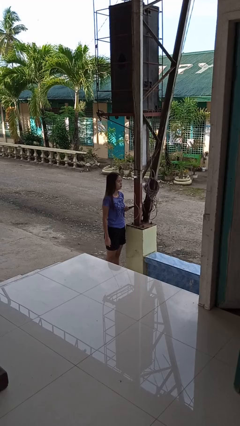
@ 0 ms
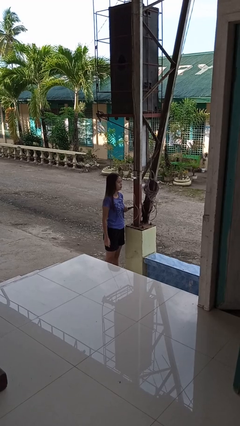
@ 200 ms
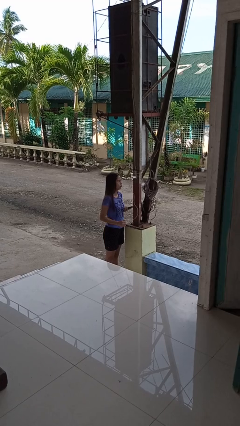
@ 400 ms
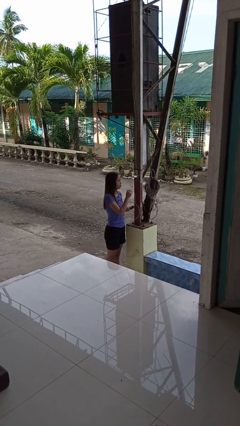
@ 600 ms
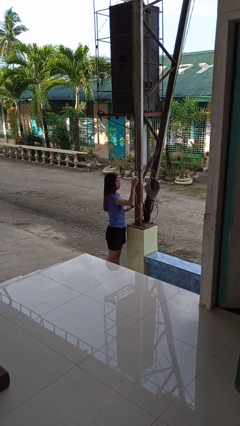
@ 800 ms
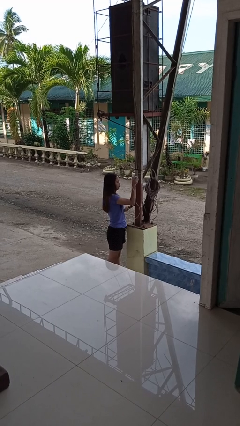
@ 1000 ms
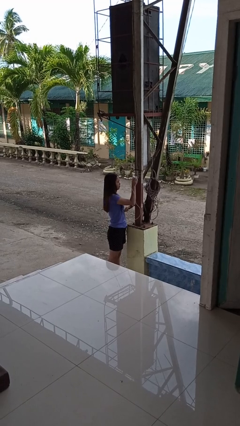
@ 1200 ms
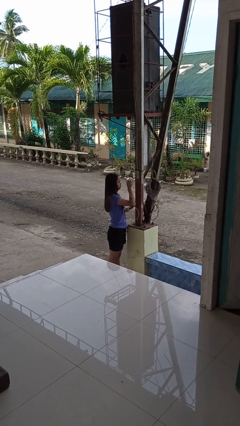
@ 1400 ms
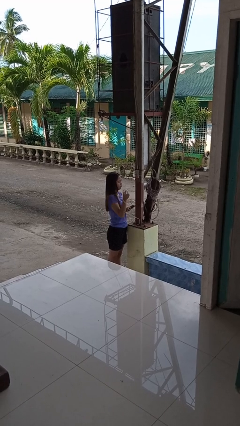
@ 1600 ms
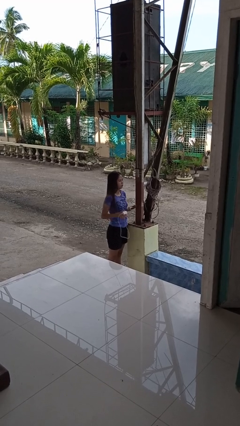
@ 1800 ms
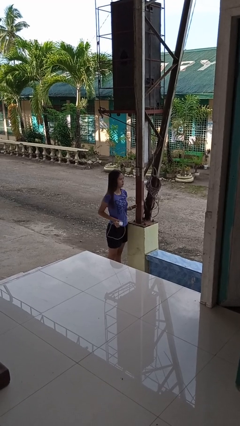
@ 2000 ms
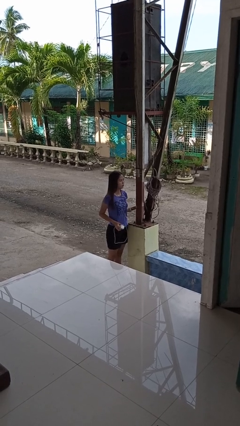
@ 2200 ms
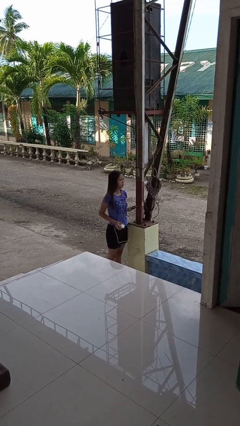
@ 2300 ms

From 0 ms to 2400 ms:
person unplugs from electrical socket

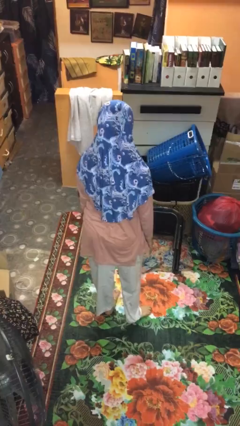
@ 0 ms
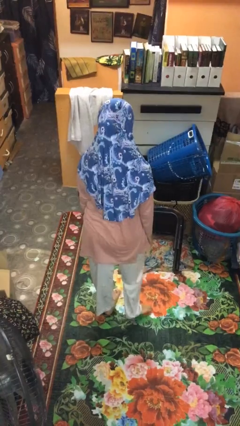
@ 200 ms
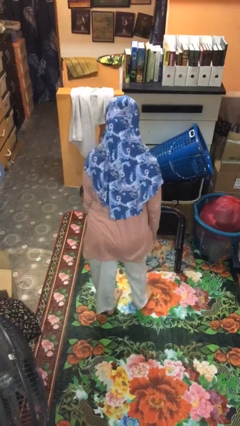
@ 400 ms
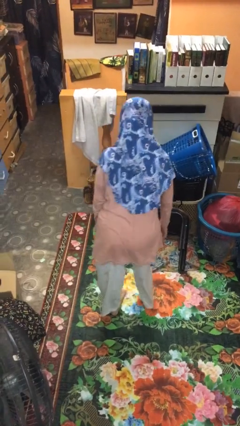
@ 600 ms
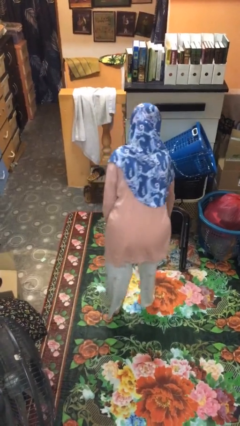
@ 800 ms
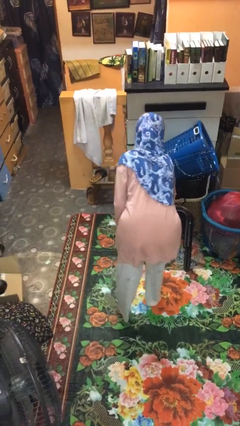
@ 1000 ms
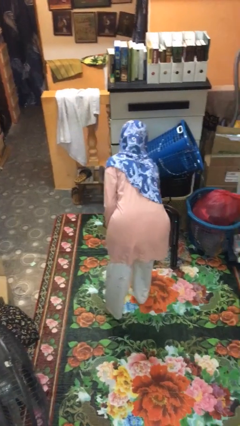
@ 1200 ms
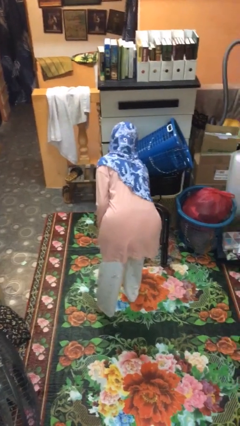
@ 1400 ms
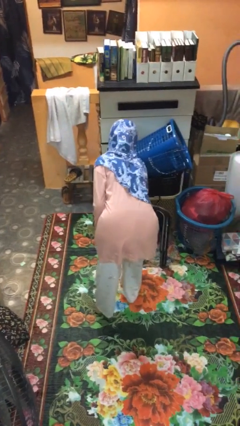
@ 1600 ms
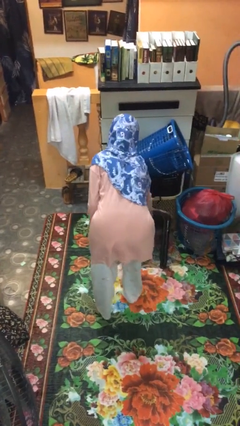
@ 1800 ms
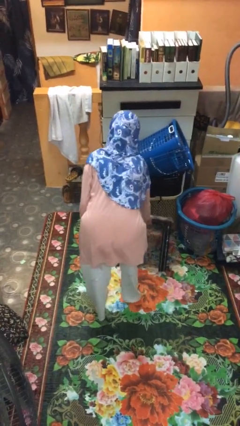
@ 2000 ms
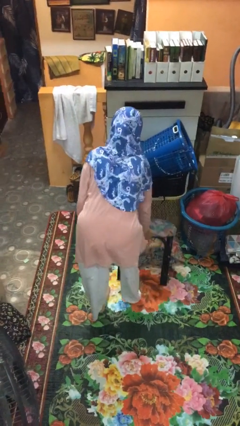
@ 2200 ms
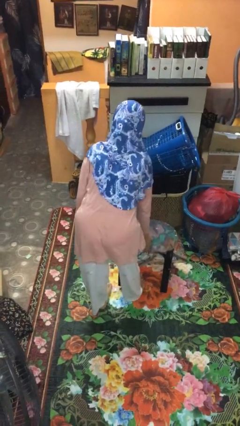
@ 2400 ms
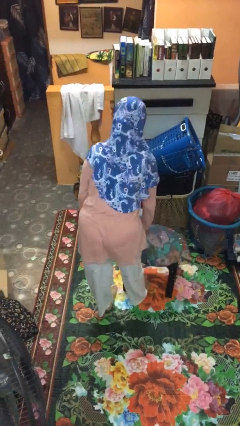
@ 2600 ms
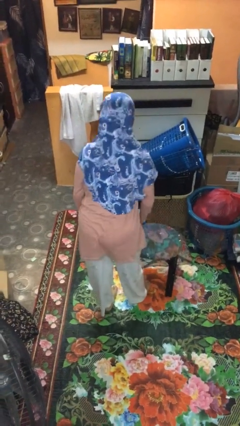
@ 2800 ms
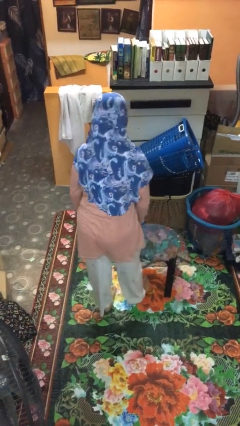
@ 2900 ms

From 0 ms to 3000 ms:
person sets upright furniture

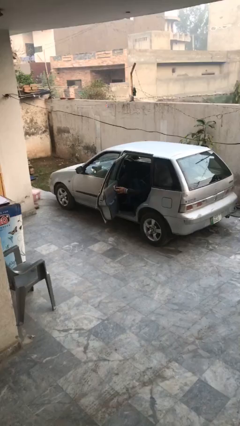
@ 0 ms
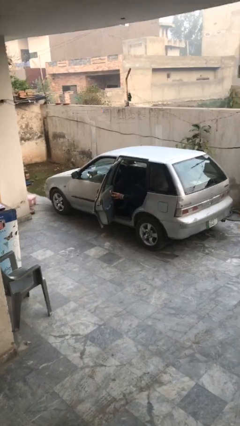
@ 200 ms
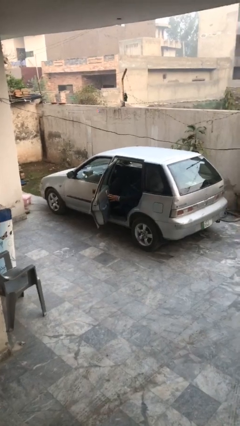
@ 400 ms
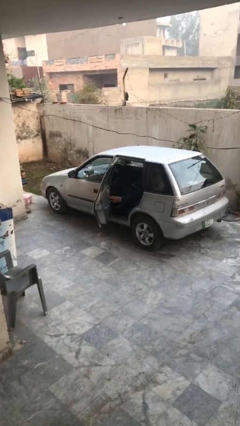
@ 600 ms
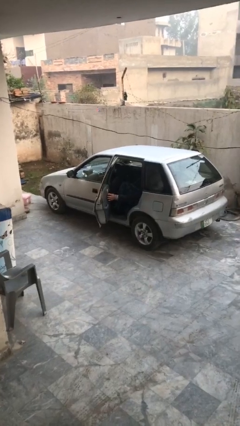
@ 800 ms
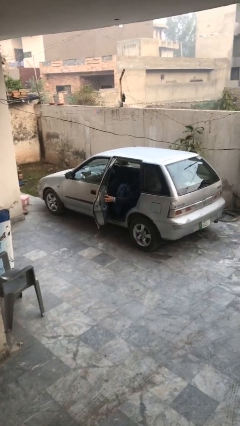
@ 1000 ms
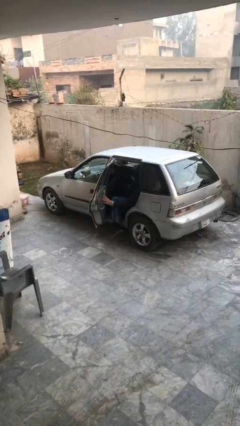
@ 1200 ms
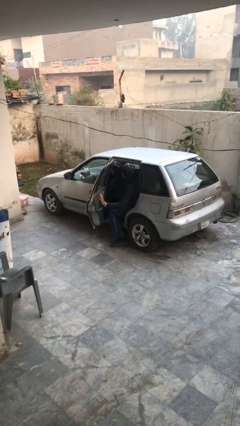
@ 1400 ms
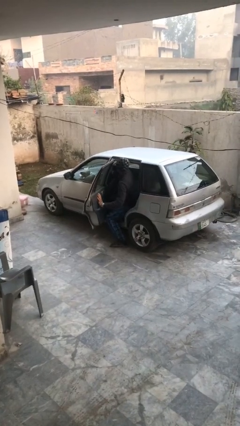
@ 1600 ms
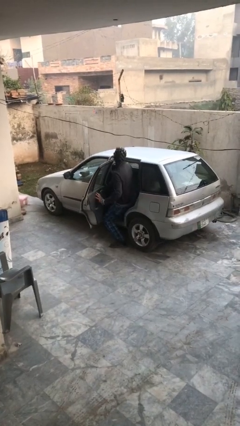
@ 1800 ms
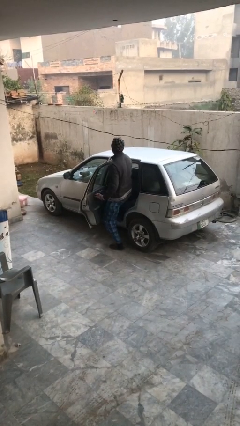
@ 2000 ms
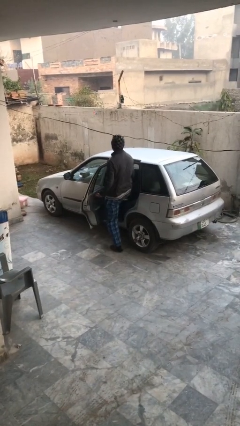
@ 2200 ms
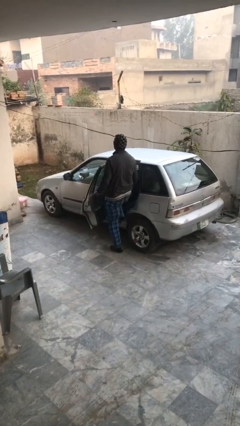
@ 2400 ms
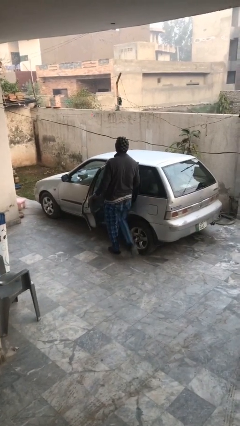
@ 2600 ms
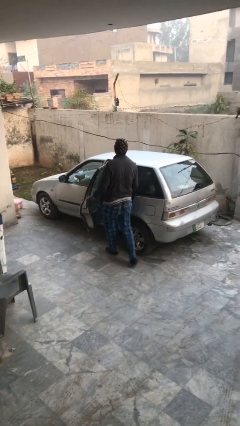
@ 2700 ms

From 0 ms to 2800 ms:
person exits car

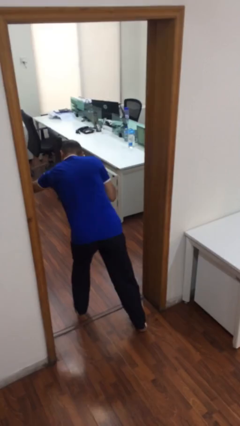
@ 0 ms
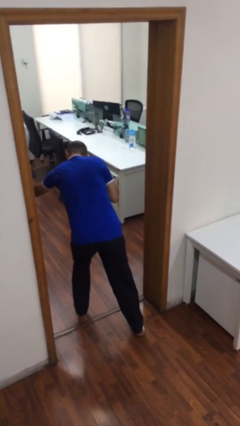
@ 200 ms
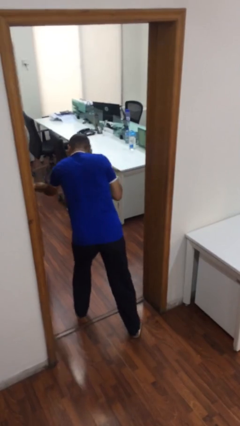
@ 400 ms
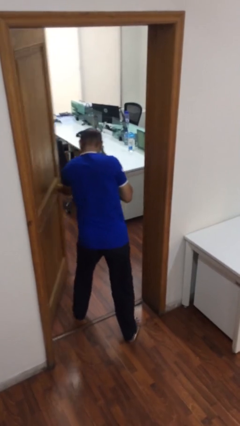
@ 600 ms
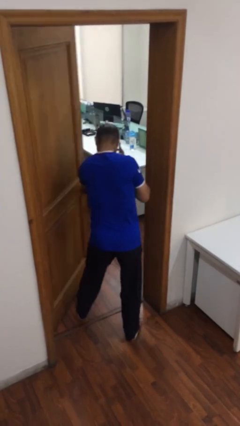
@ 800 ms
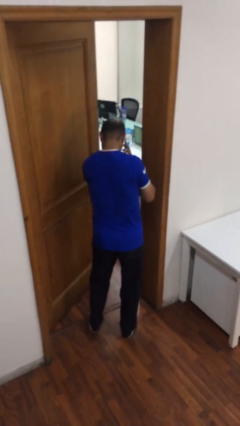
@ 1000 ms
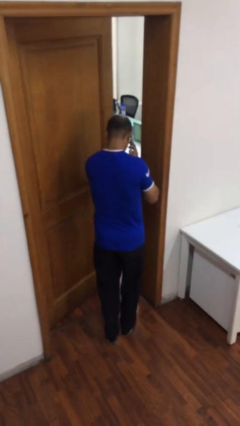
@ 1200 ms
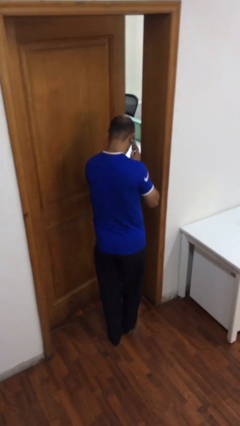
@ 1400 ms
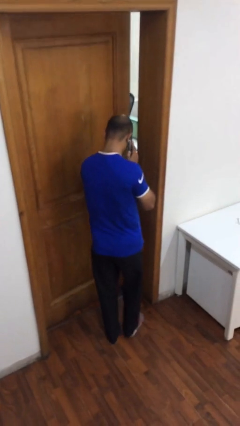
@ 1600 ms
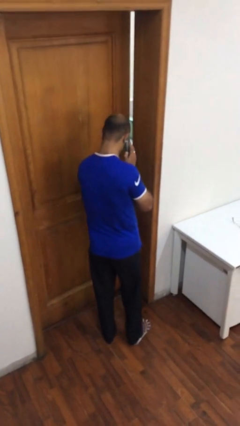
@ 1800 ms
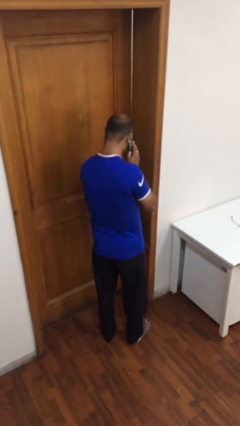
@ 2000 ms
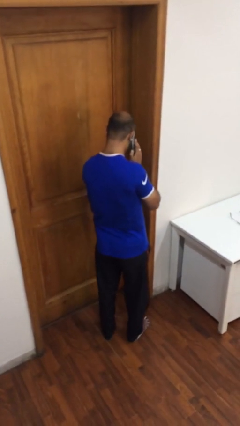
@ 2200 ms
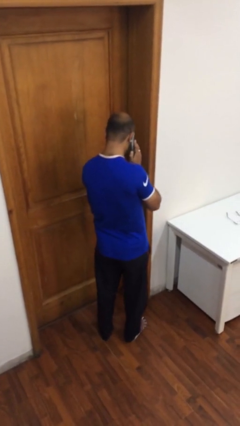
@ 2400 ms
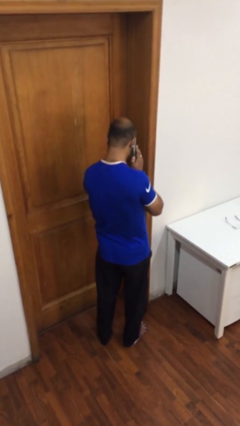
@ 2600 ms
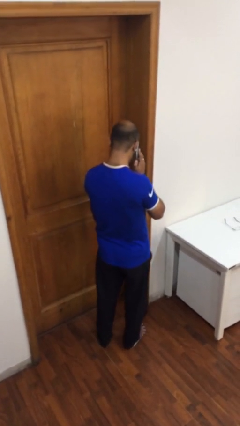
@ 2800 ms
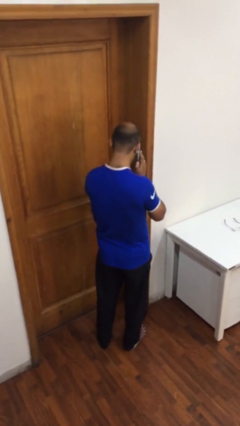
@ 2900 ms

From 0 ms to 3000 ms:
person closes facility door

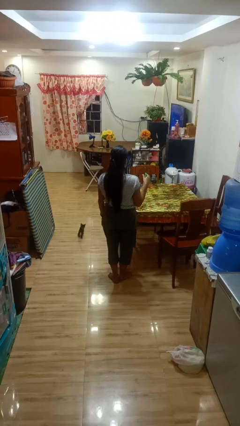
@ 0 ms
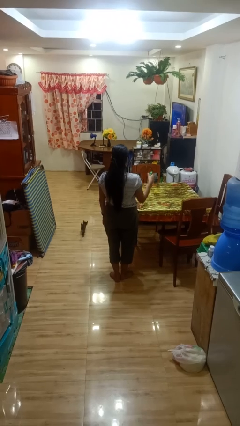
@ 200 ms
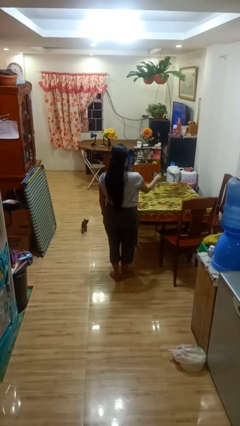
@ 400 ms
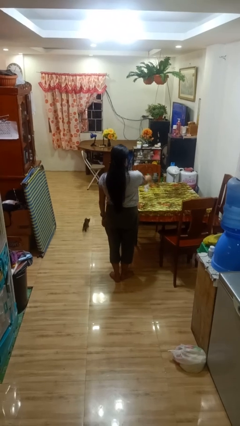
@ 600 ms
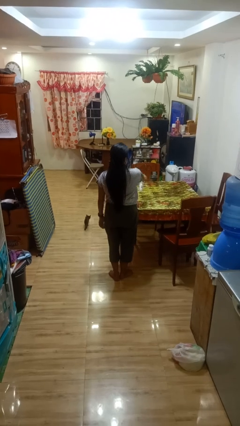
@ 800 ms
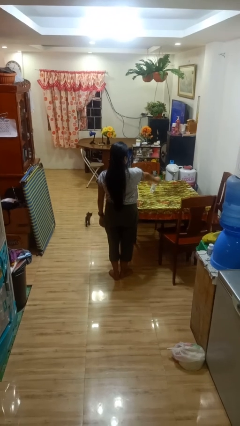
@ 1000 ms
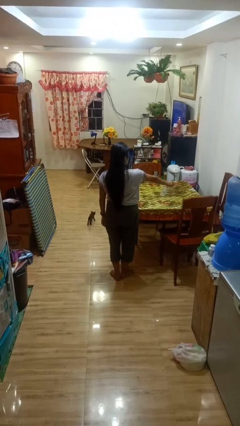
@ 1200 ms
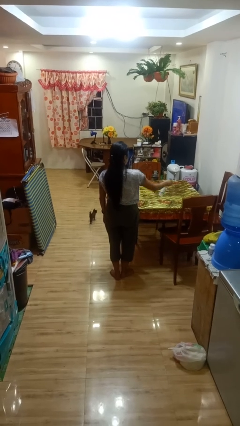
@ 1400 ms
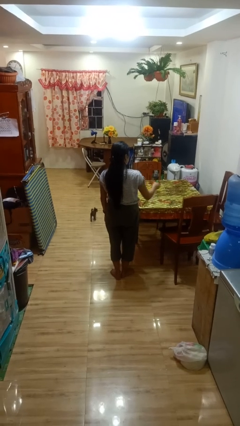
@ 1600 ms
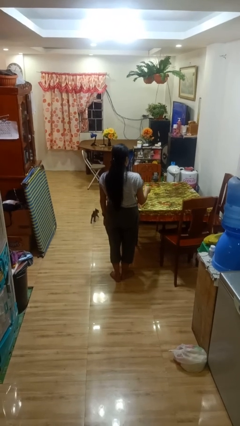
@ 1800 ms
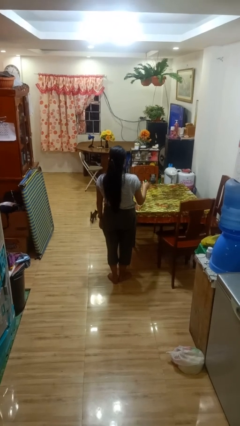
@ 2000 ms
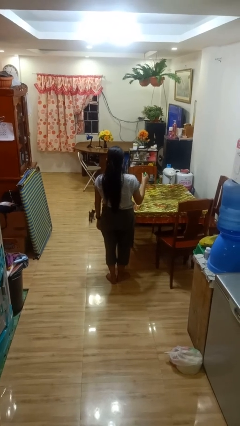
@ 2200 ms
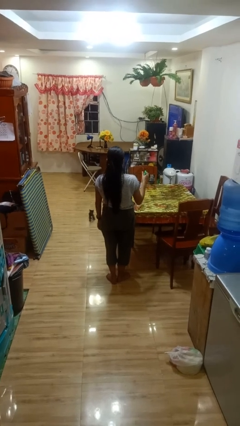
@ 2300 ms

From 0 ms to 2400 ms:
person sprays from bottle

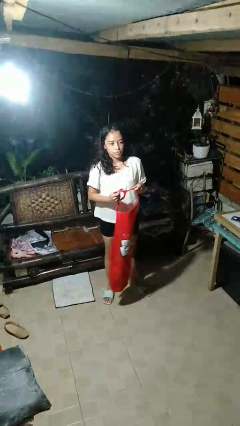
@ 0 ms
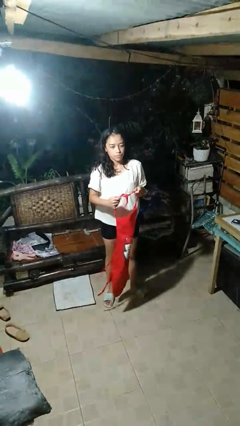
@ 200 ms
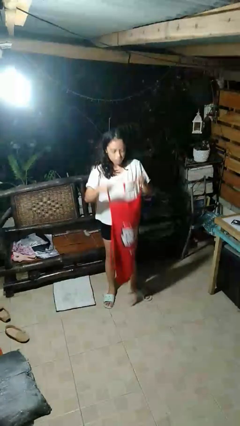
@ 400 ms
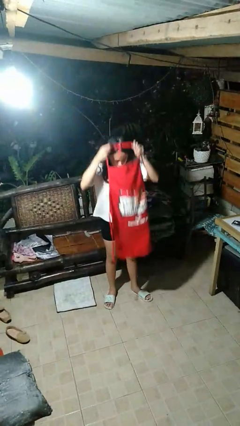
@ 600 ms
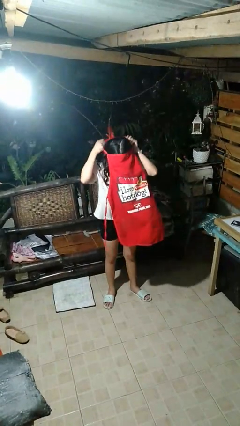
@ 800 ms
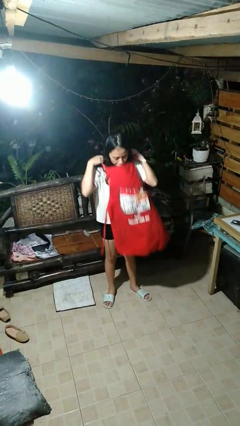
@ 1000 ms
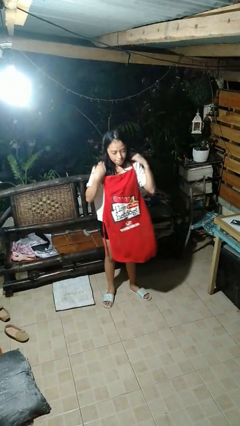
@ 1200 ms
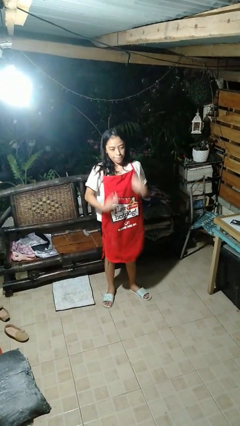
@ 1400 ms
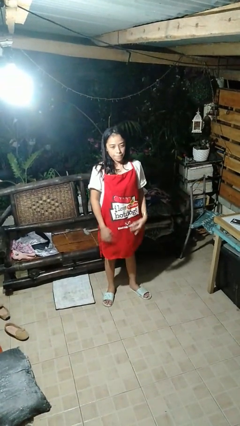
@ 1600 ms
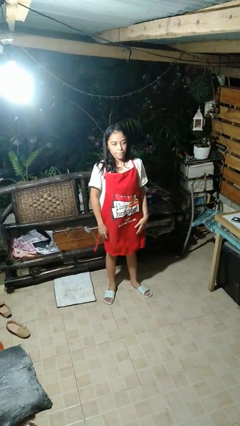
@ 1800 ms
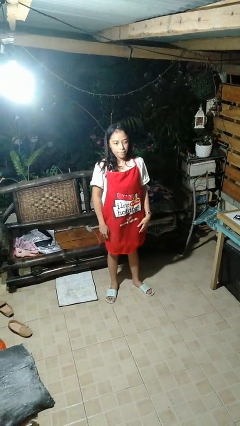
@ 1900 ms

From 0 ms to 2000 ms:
person puts on apron

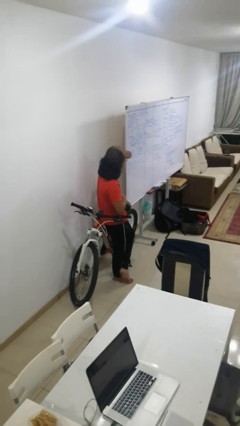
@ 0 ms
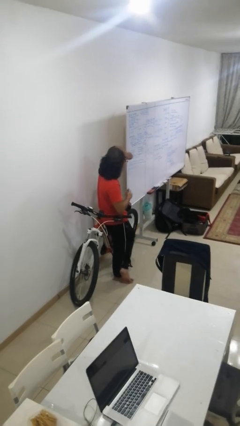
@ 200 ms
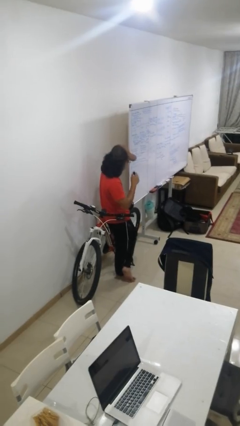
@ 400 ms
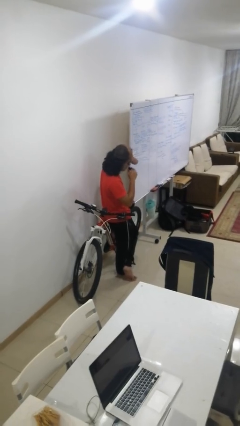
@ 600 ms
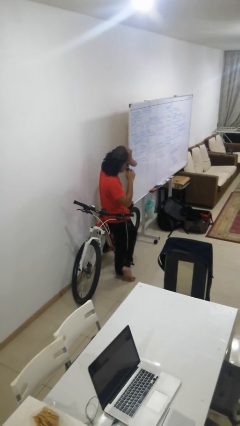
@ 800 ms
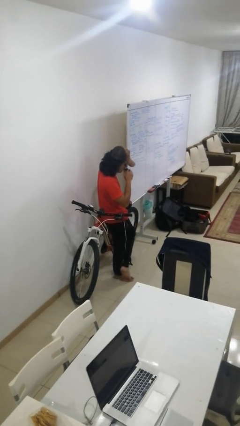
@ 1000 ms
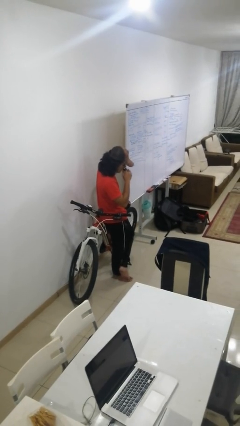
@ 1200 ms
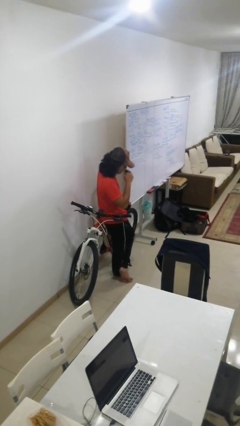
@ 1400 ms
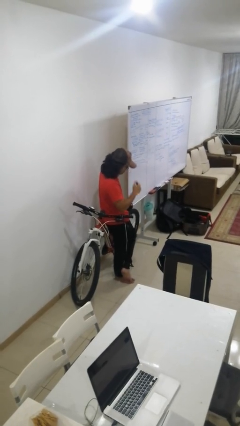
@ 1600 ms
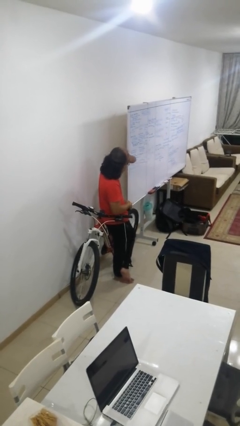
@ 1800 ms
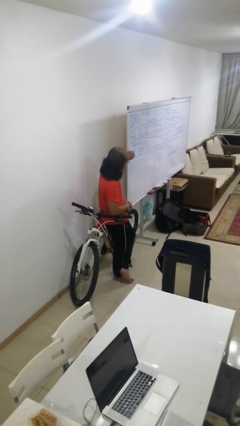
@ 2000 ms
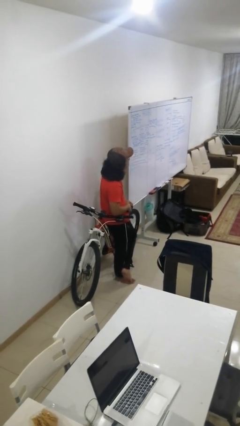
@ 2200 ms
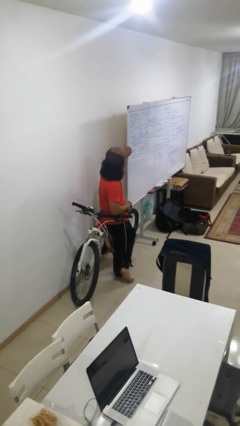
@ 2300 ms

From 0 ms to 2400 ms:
person vapes
